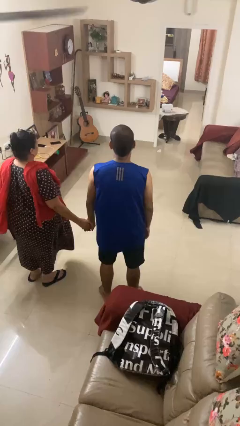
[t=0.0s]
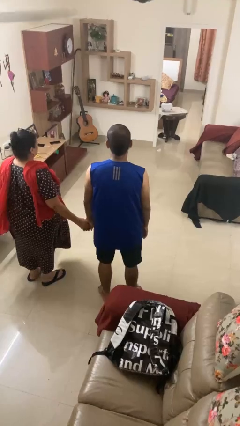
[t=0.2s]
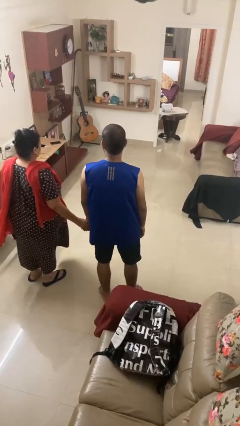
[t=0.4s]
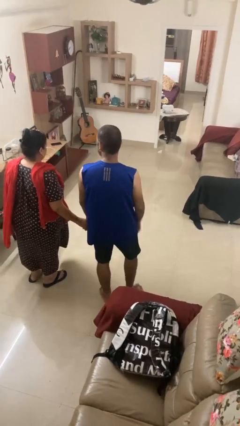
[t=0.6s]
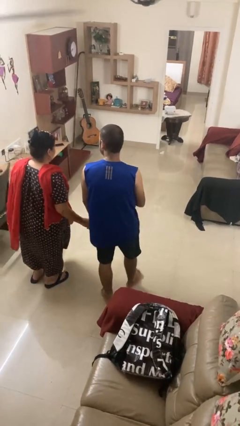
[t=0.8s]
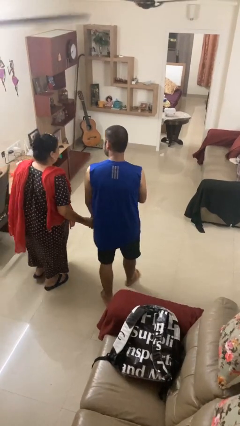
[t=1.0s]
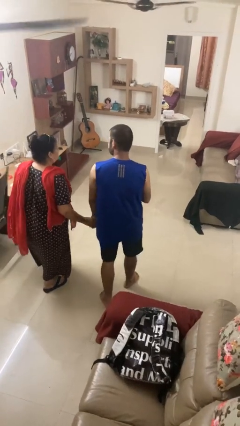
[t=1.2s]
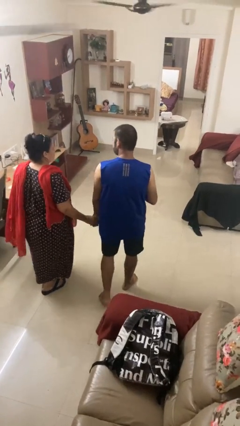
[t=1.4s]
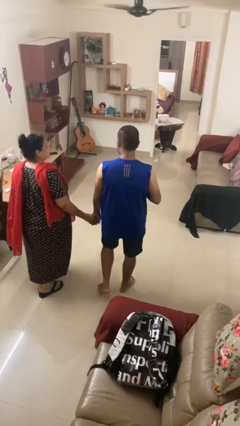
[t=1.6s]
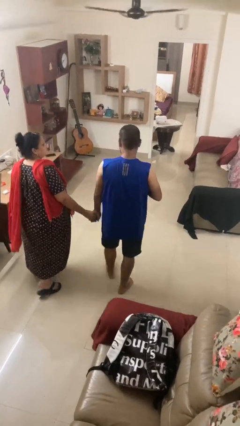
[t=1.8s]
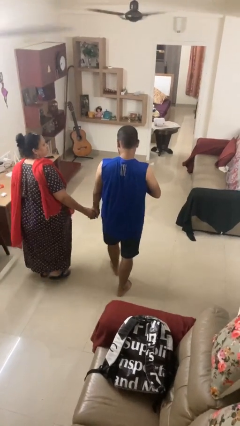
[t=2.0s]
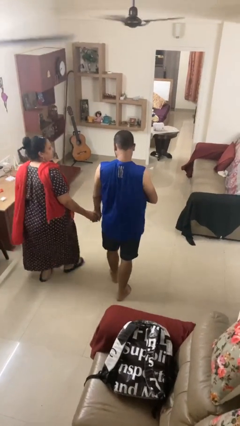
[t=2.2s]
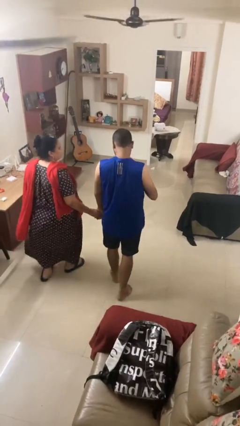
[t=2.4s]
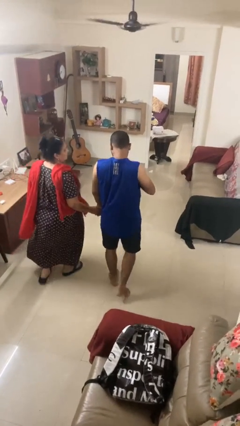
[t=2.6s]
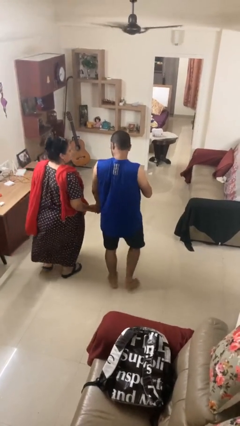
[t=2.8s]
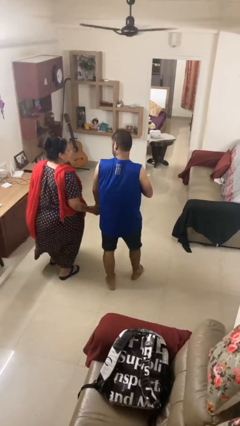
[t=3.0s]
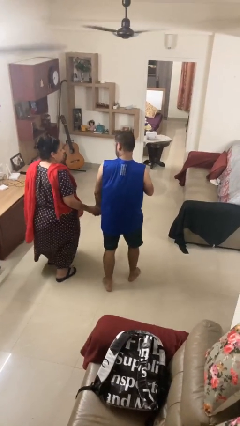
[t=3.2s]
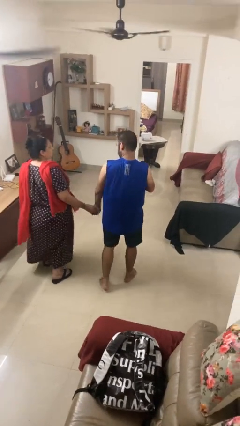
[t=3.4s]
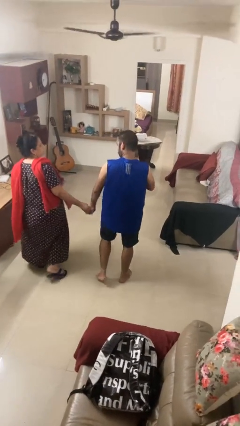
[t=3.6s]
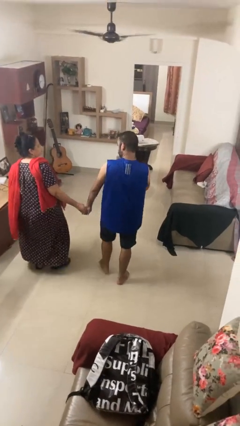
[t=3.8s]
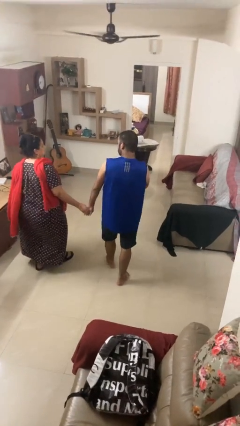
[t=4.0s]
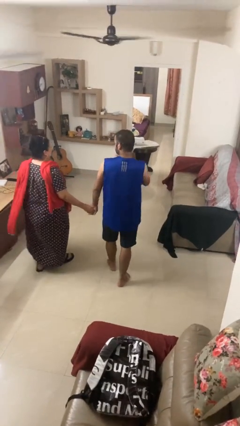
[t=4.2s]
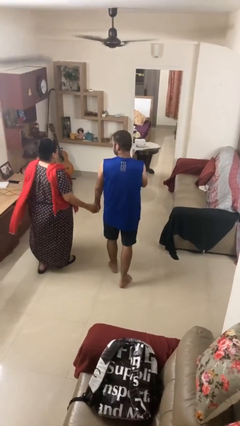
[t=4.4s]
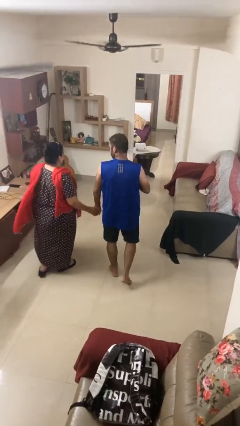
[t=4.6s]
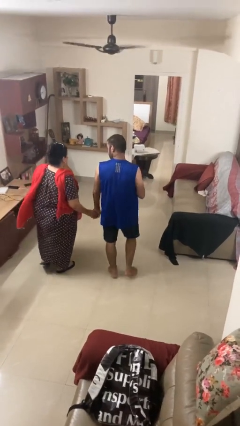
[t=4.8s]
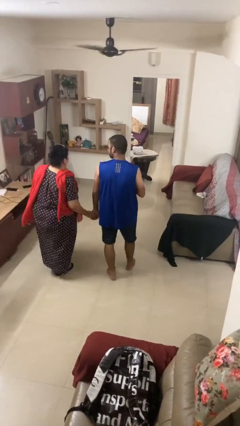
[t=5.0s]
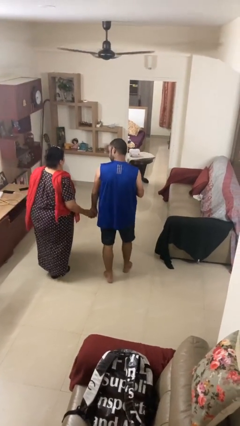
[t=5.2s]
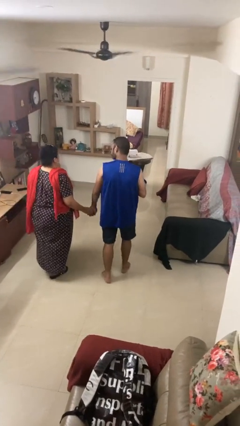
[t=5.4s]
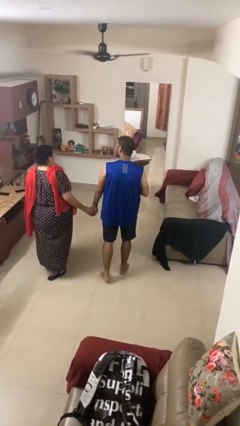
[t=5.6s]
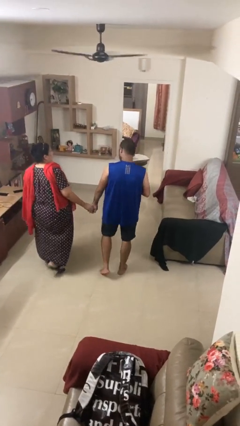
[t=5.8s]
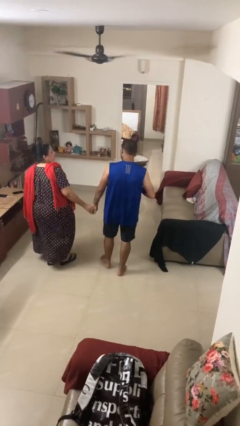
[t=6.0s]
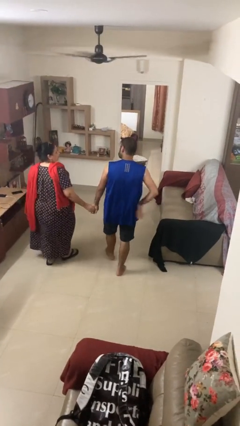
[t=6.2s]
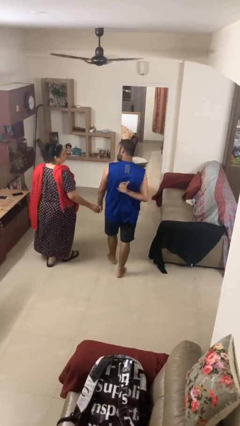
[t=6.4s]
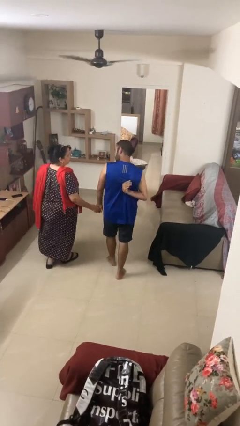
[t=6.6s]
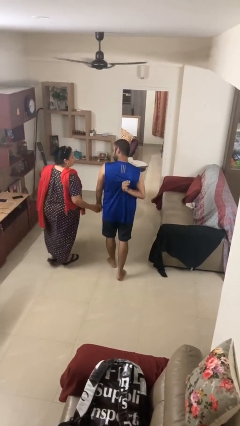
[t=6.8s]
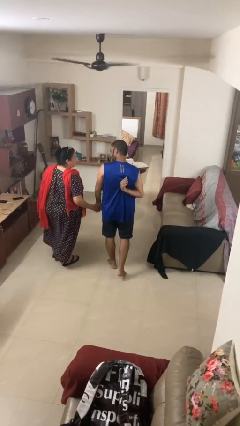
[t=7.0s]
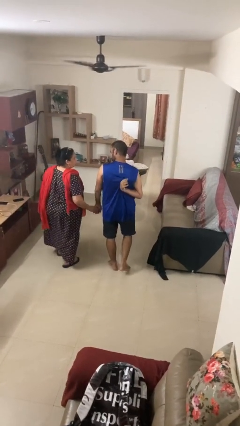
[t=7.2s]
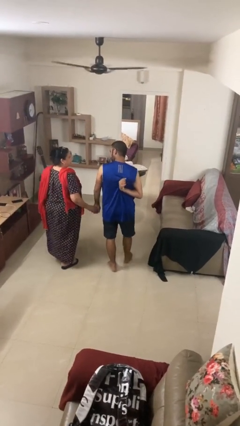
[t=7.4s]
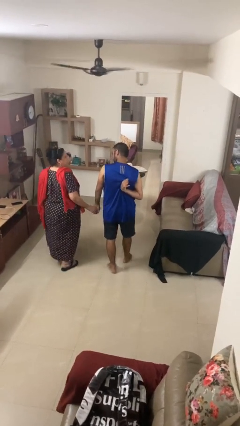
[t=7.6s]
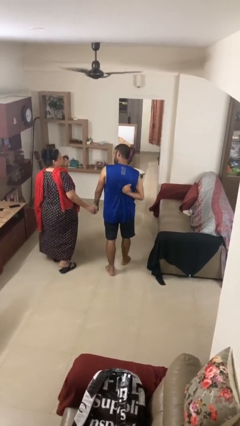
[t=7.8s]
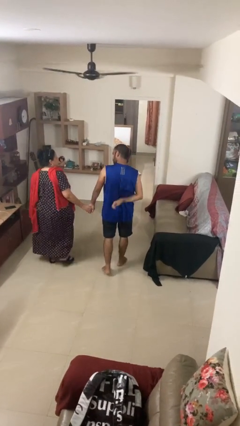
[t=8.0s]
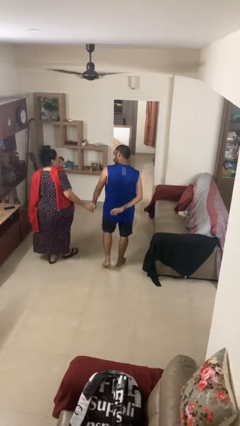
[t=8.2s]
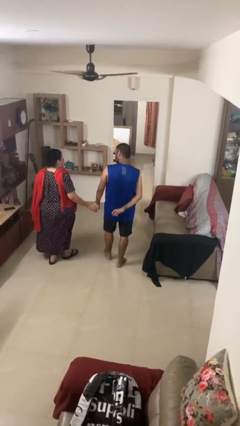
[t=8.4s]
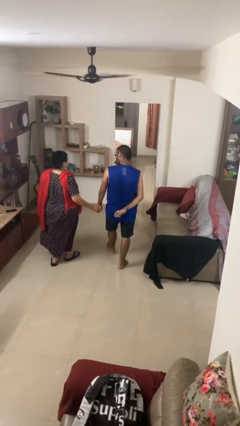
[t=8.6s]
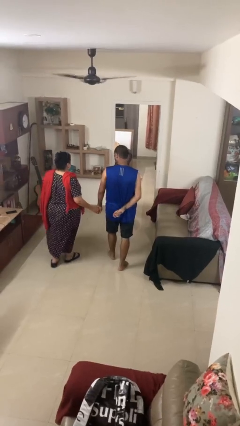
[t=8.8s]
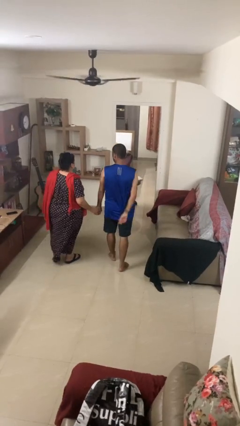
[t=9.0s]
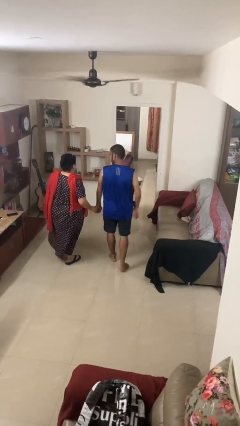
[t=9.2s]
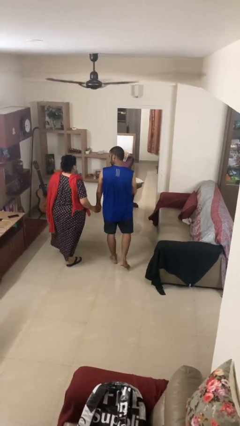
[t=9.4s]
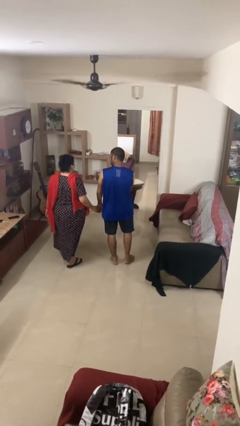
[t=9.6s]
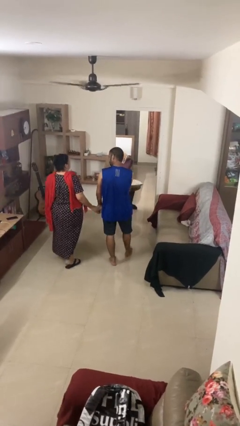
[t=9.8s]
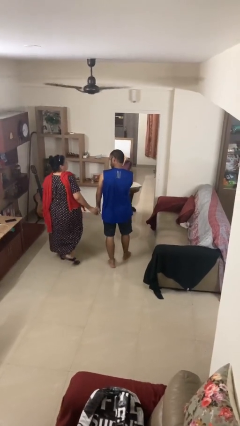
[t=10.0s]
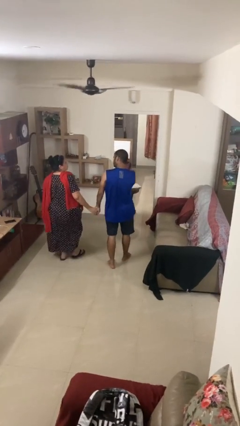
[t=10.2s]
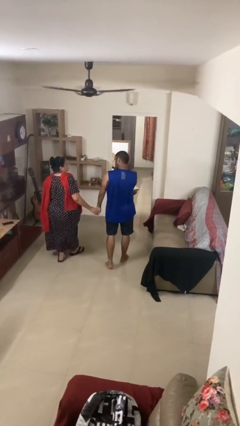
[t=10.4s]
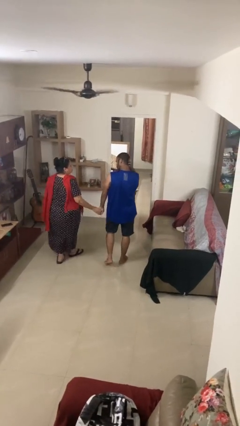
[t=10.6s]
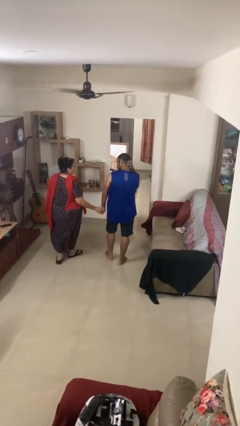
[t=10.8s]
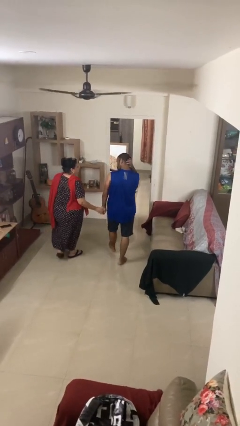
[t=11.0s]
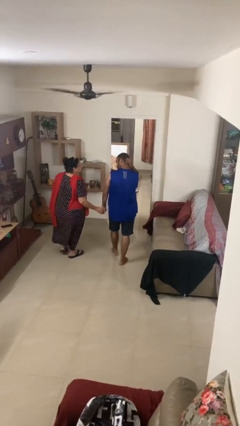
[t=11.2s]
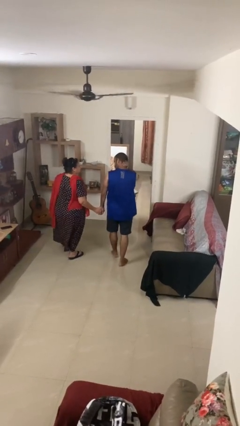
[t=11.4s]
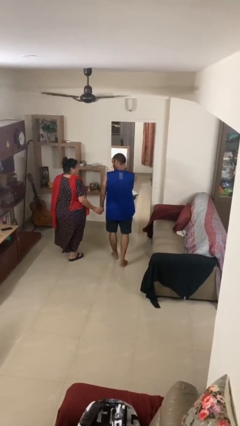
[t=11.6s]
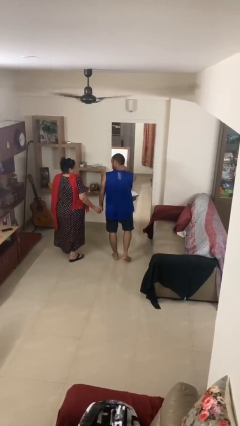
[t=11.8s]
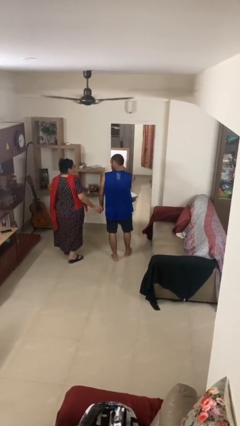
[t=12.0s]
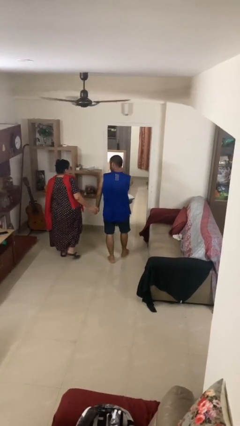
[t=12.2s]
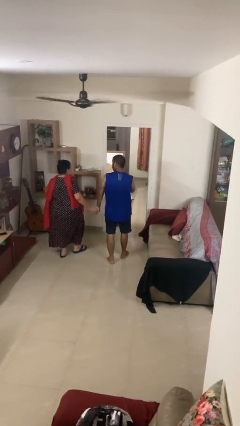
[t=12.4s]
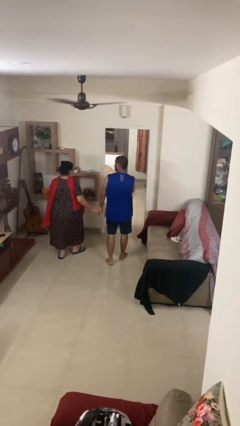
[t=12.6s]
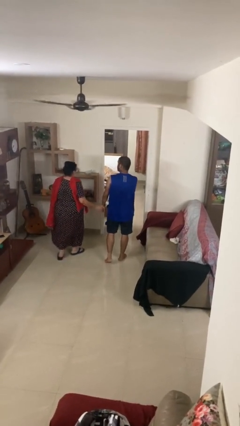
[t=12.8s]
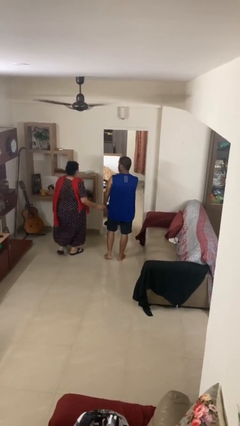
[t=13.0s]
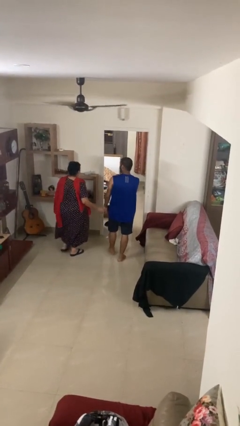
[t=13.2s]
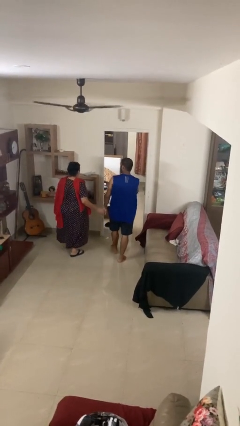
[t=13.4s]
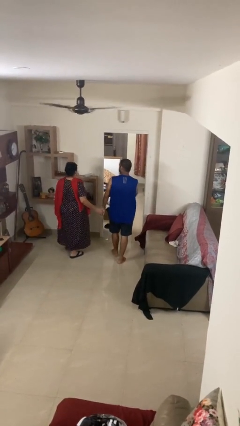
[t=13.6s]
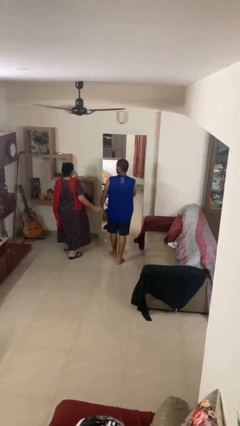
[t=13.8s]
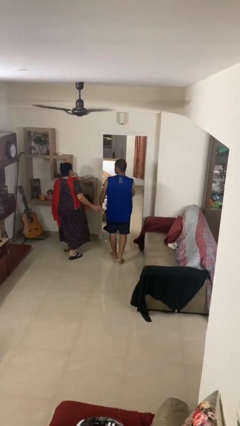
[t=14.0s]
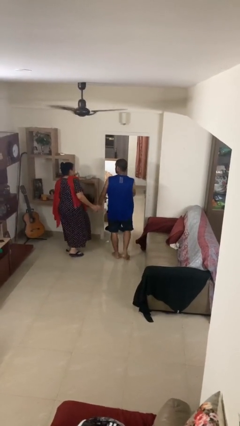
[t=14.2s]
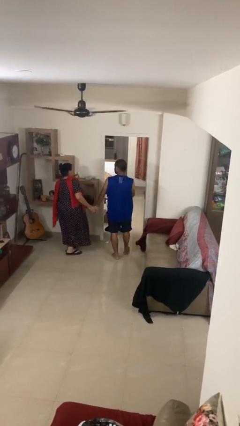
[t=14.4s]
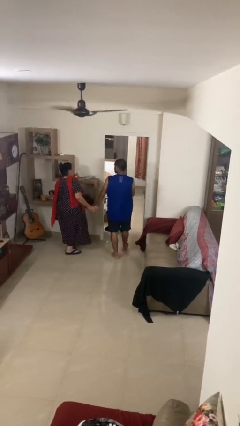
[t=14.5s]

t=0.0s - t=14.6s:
person holds hand

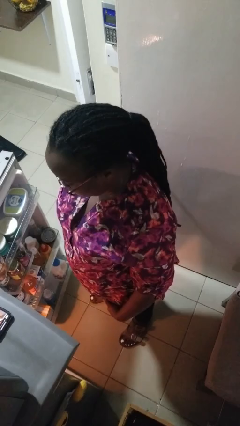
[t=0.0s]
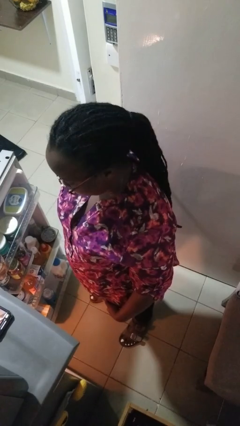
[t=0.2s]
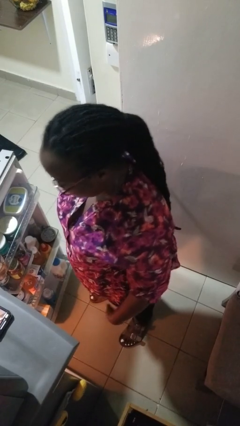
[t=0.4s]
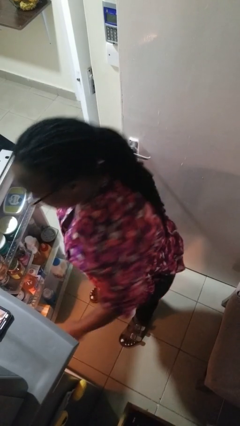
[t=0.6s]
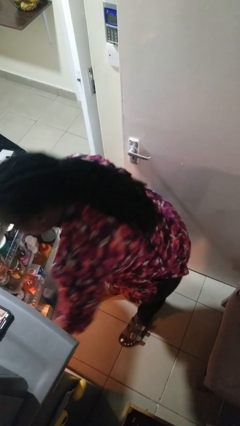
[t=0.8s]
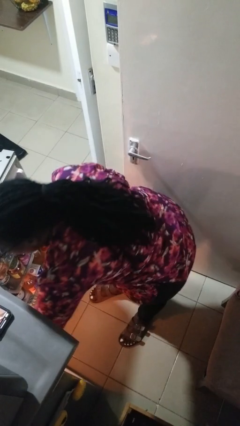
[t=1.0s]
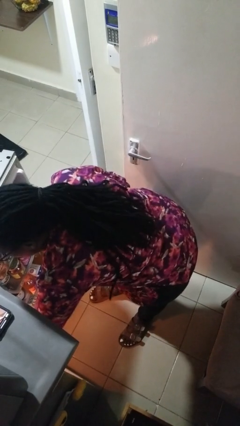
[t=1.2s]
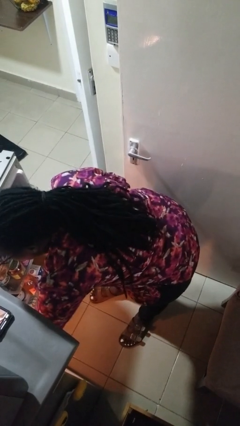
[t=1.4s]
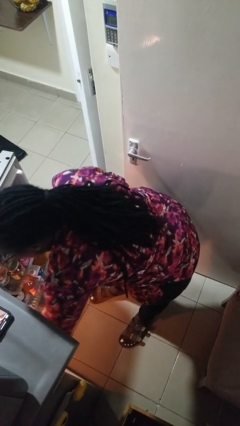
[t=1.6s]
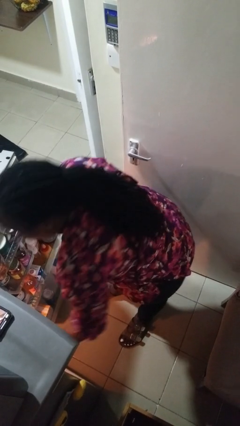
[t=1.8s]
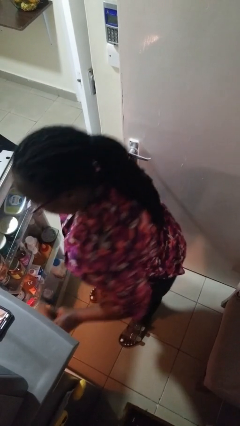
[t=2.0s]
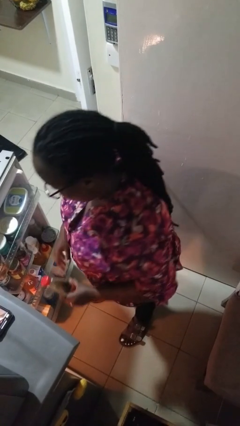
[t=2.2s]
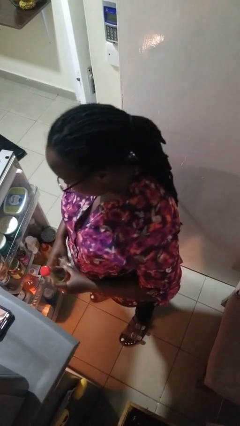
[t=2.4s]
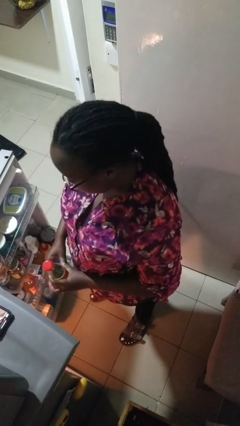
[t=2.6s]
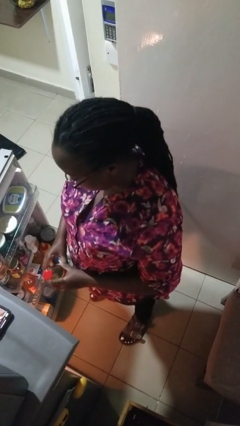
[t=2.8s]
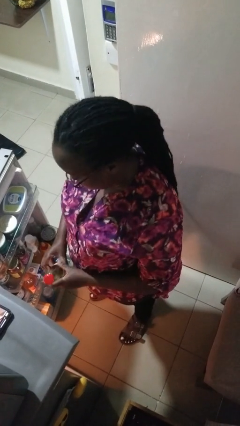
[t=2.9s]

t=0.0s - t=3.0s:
person takes object from refrigerator

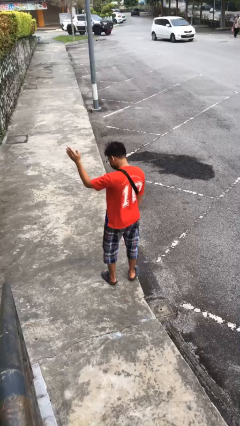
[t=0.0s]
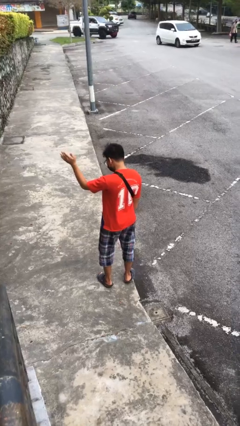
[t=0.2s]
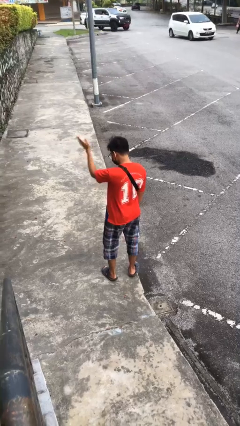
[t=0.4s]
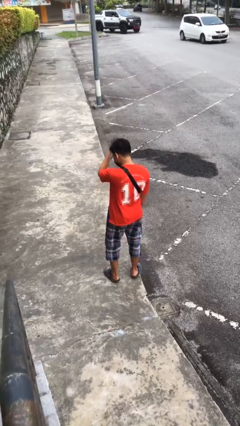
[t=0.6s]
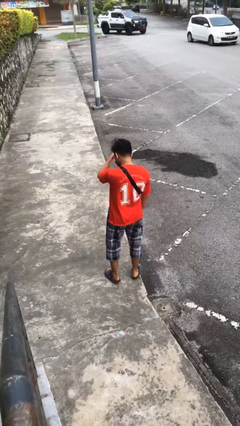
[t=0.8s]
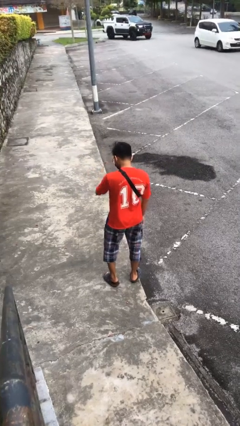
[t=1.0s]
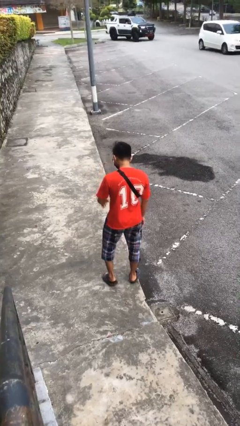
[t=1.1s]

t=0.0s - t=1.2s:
person gestures swipe right
